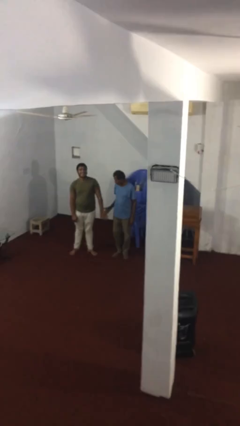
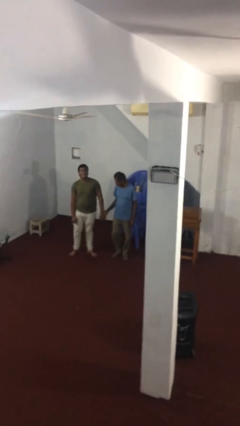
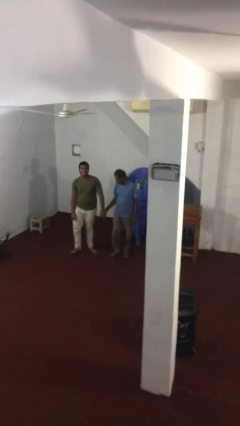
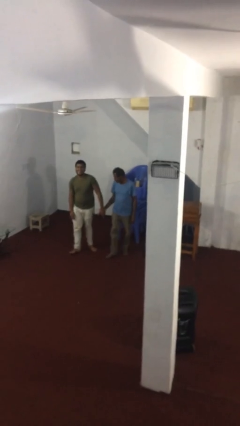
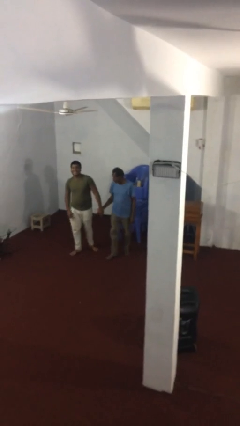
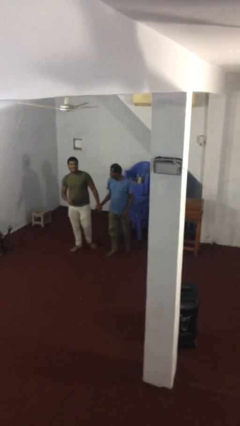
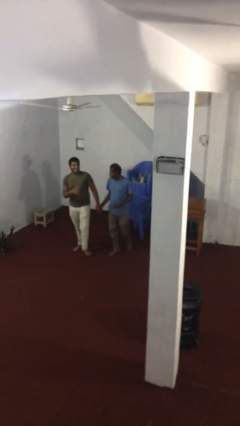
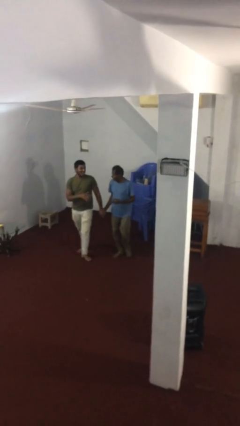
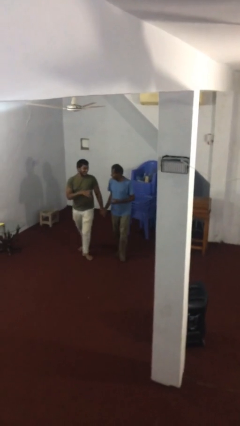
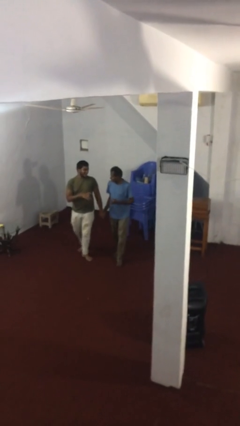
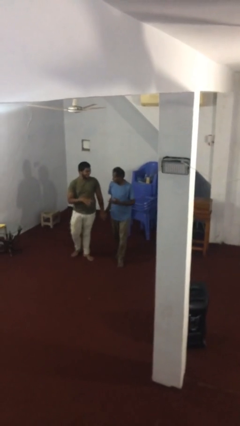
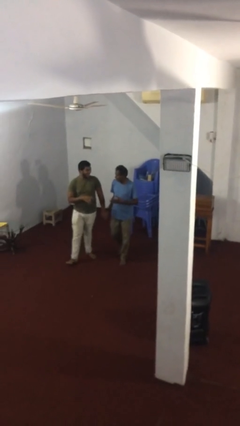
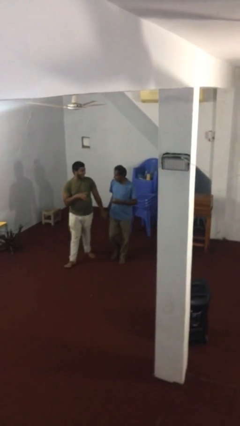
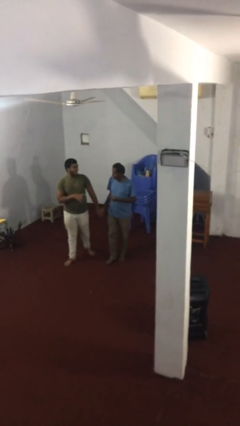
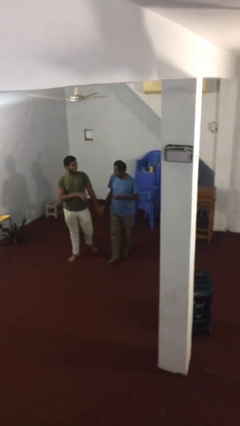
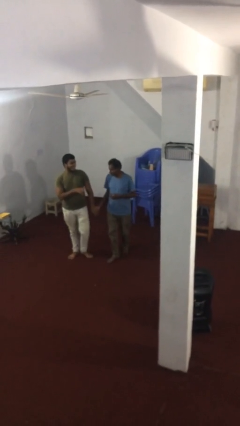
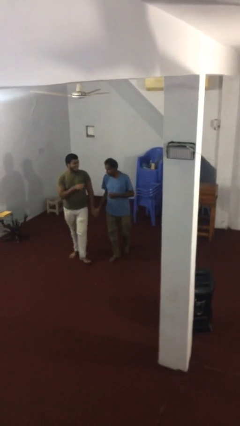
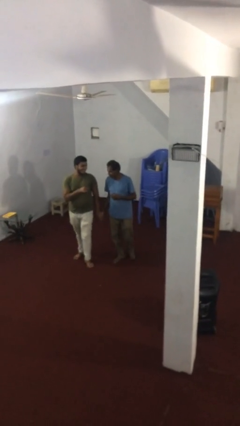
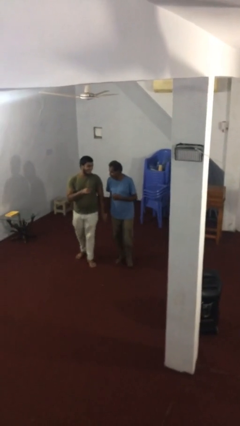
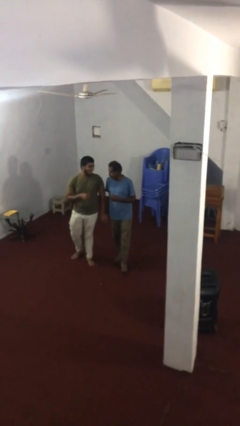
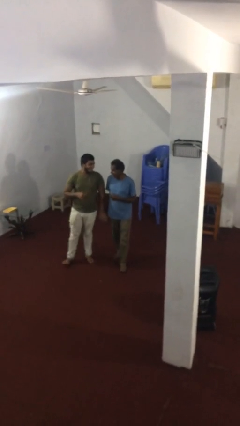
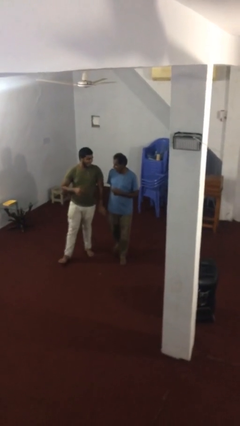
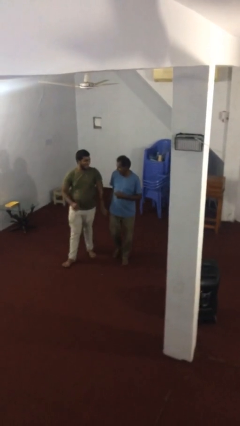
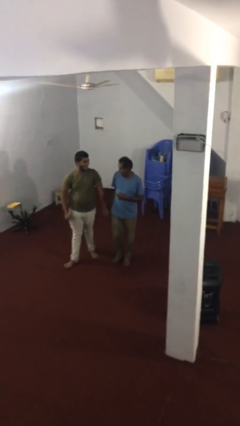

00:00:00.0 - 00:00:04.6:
person holds hand

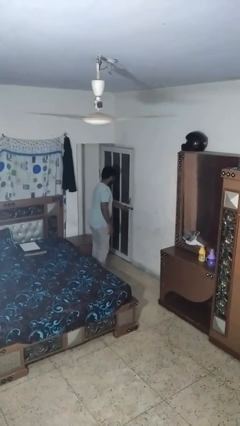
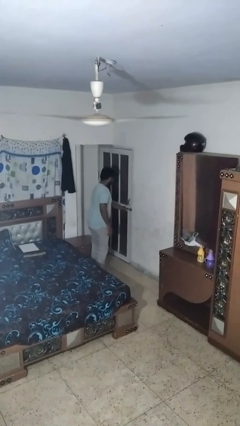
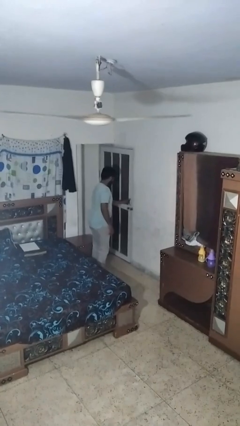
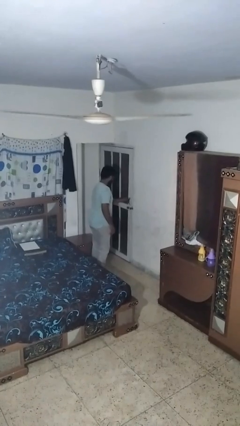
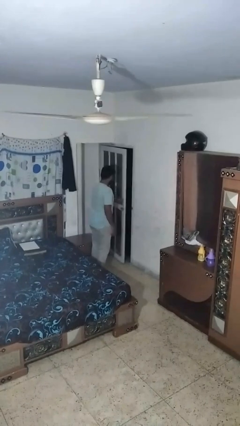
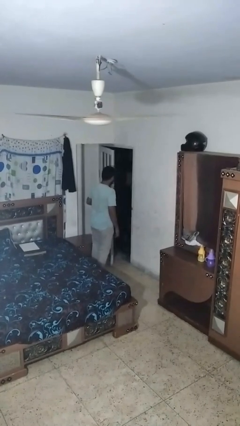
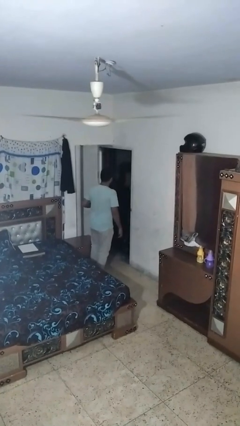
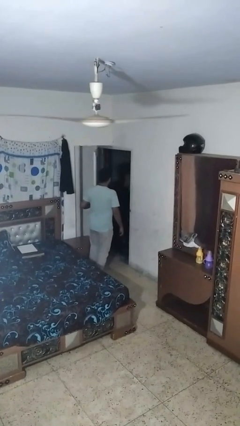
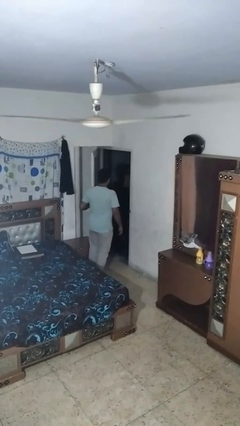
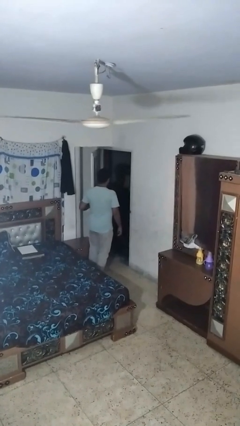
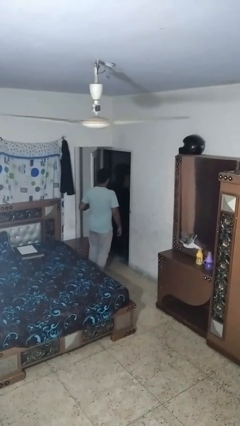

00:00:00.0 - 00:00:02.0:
person opens facility door

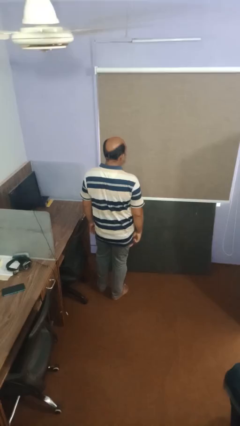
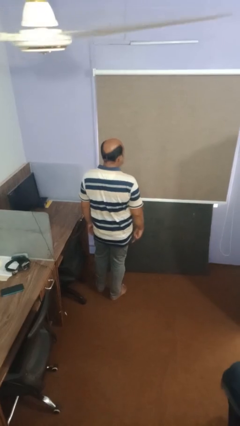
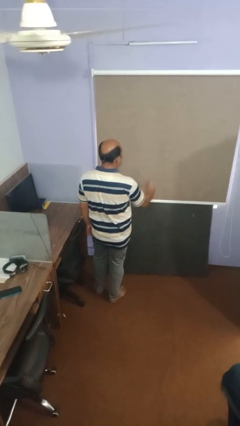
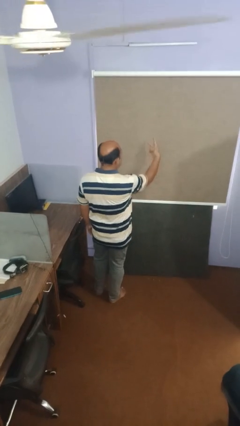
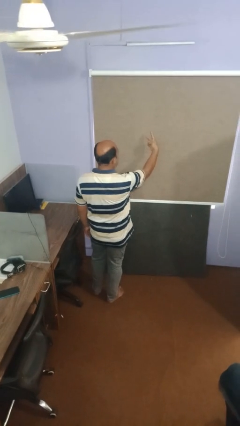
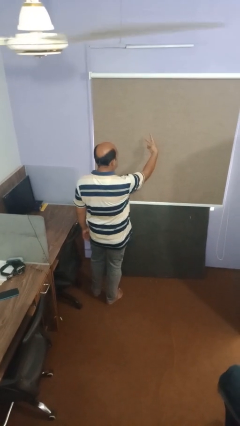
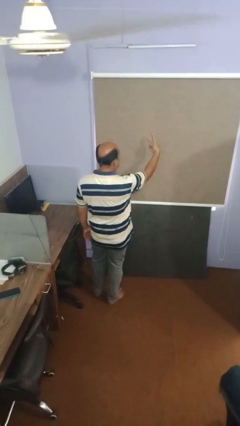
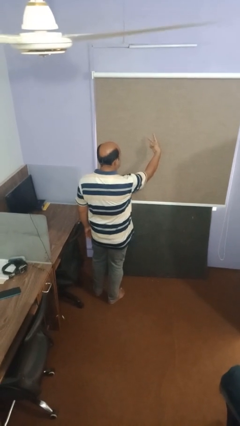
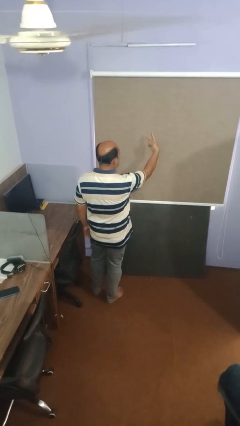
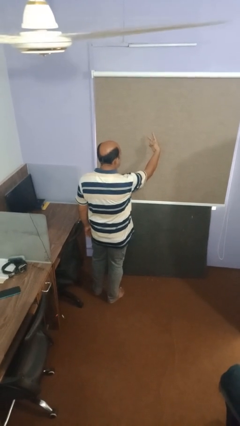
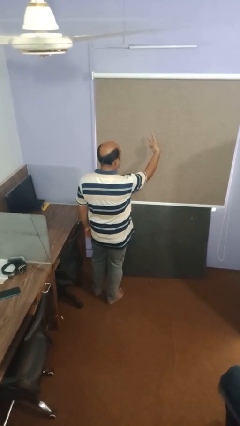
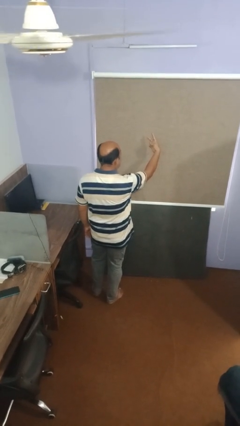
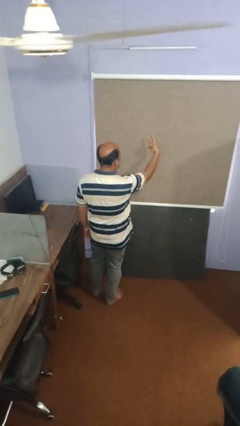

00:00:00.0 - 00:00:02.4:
person gestures peace

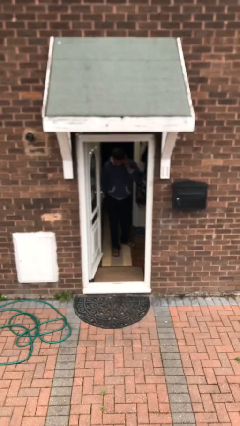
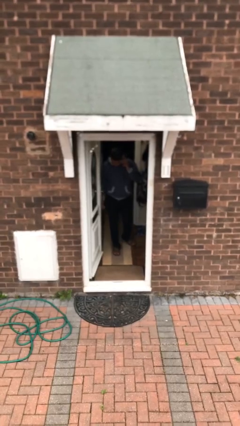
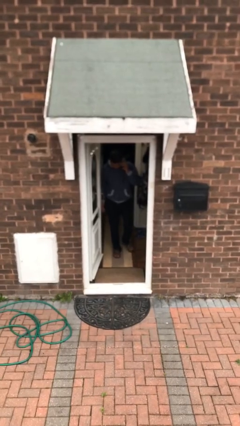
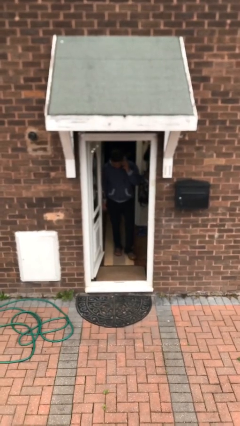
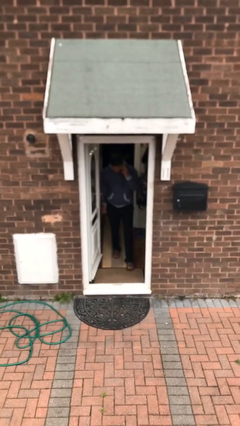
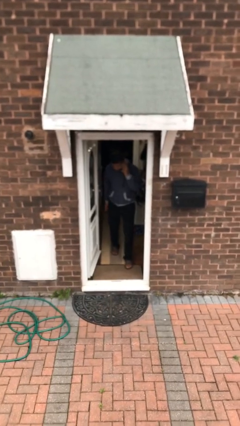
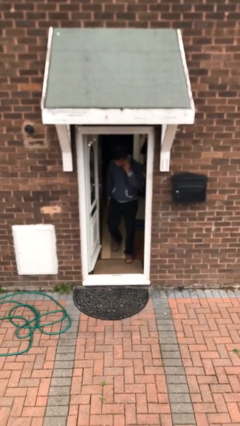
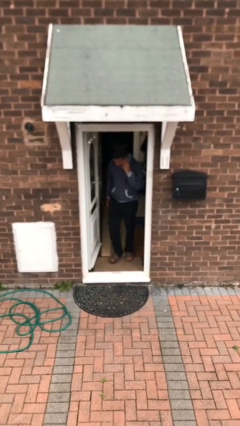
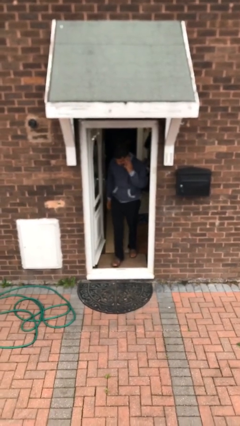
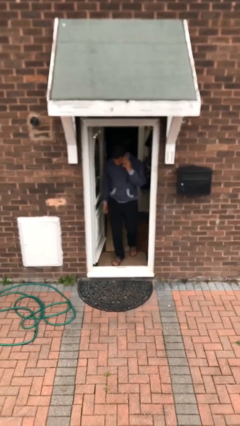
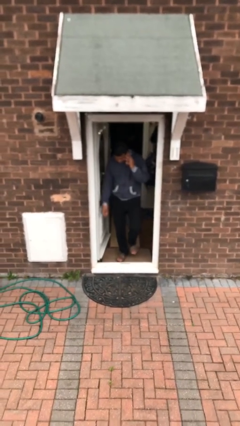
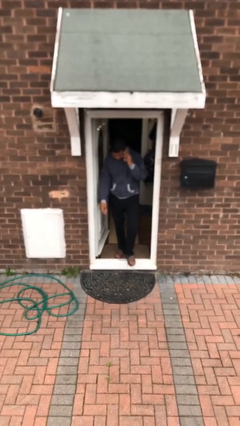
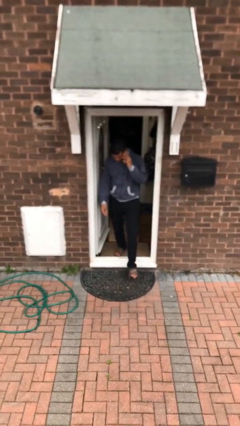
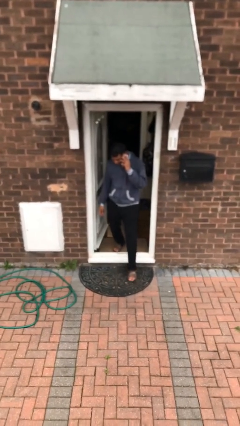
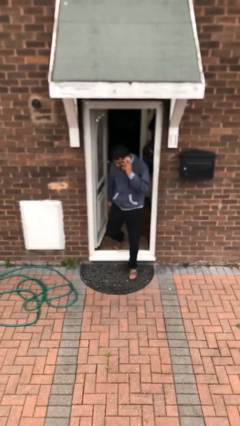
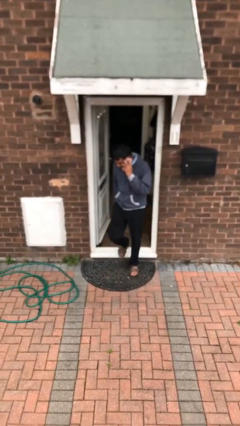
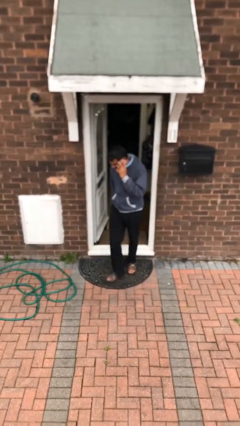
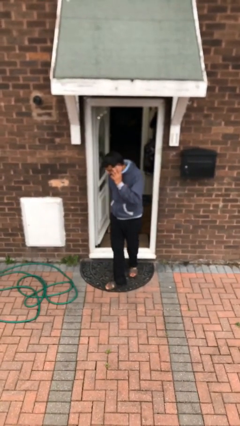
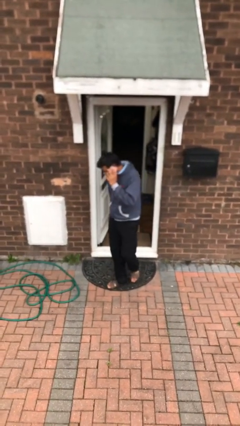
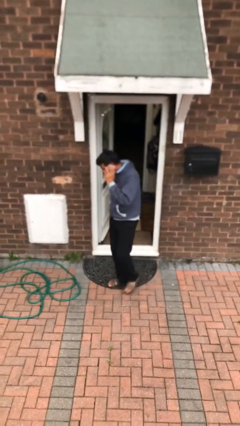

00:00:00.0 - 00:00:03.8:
person enters scene through structure

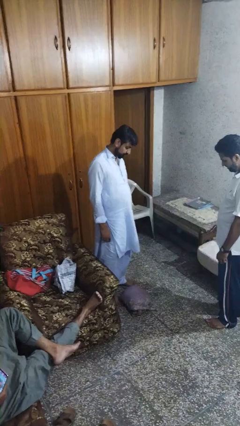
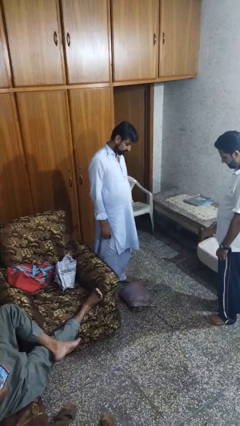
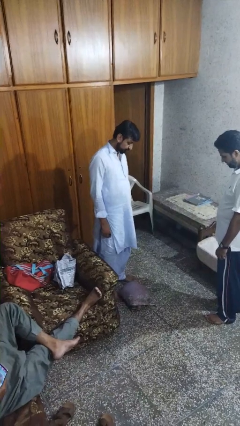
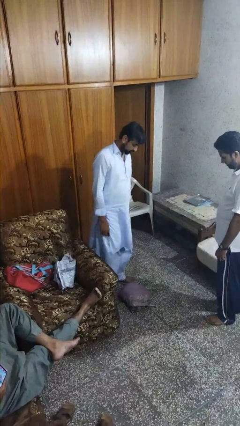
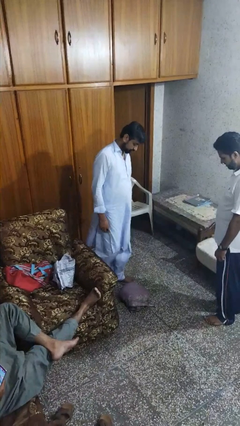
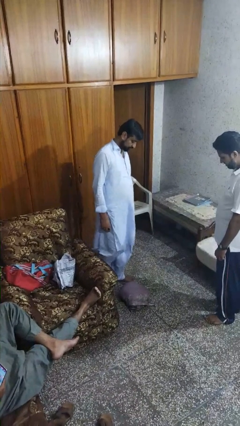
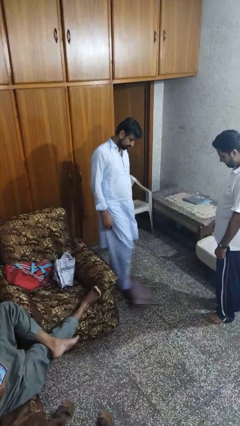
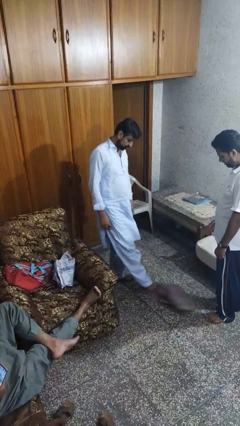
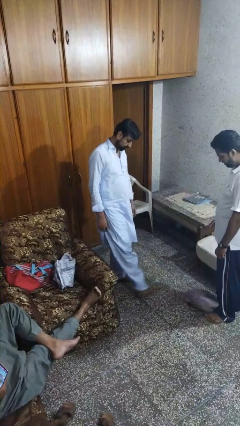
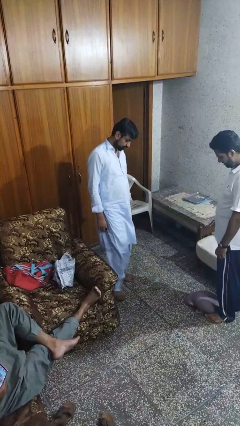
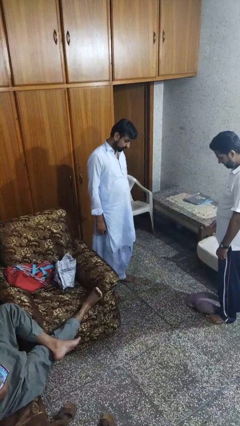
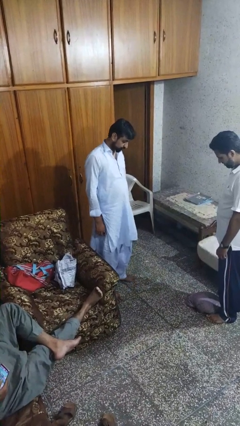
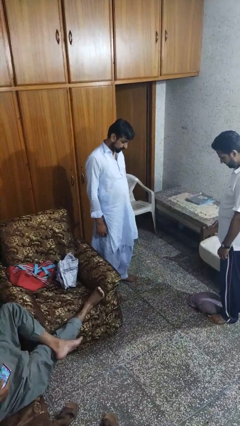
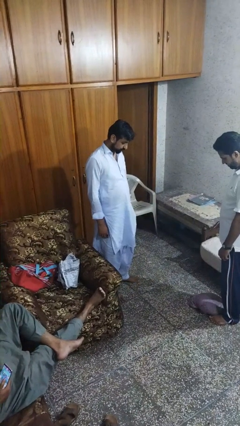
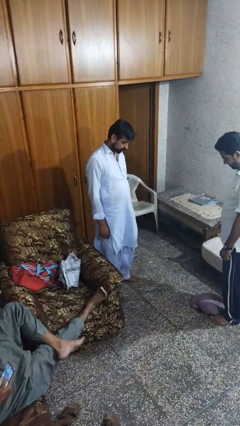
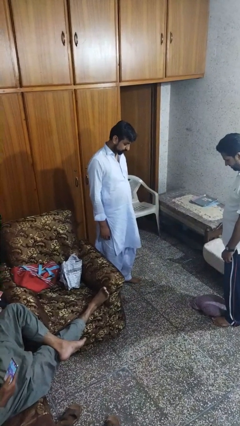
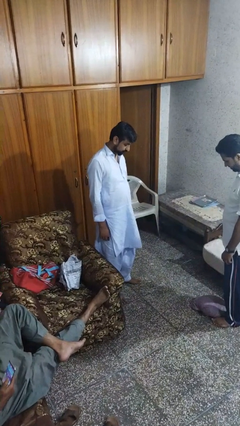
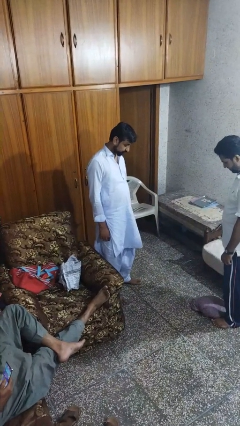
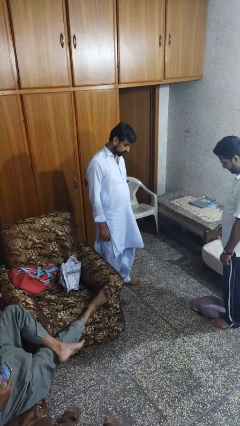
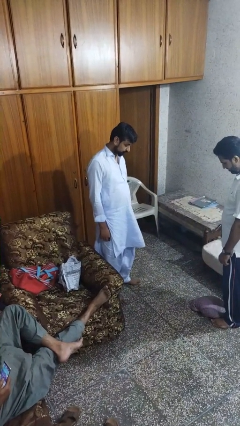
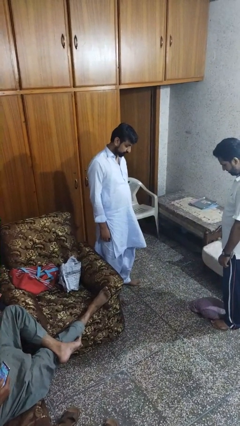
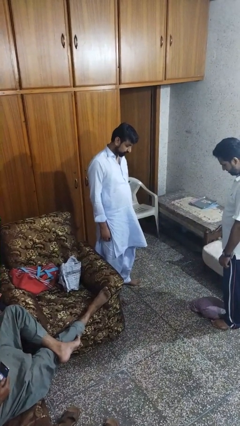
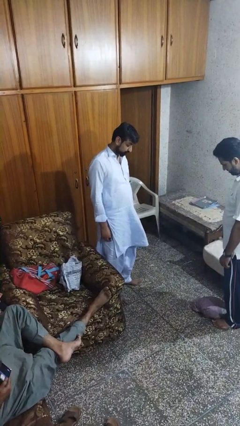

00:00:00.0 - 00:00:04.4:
person kicks object to person

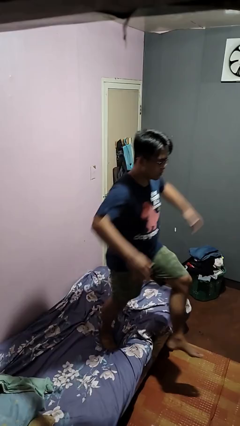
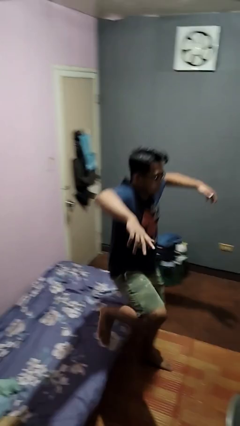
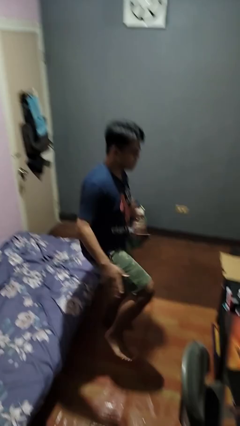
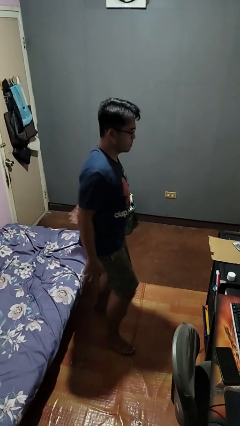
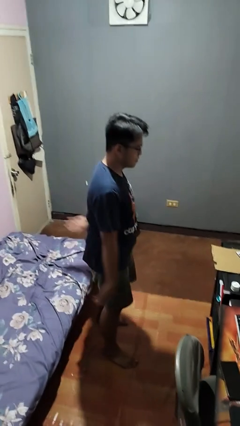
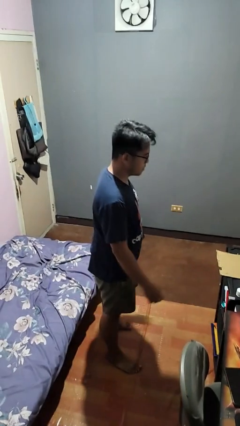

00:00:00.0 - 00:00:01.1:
person jumps on bed
